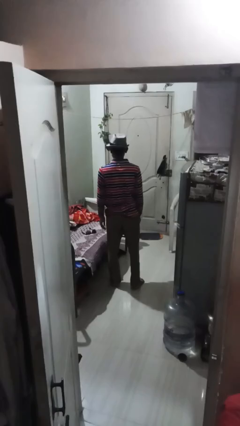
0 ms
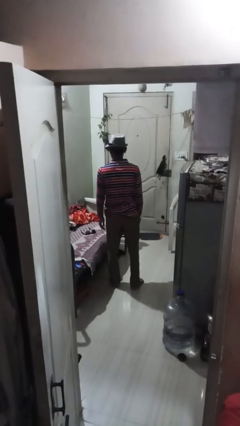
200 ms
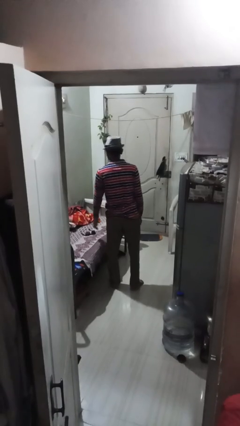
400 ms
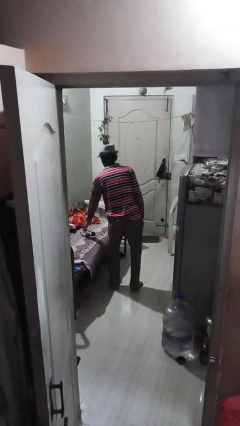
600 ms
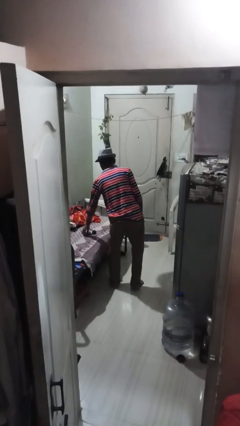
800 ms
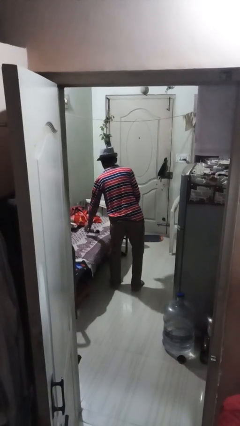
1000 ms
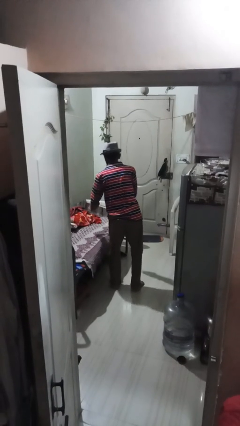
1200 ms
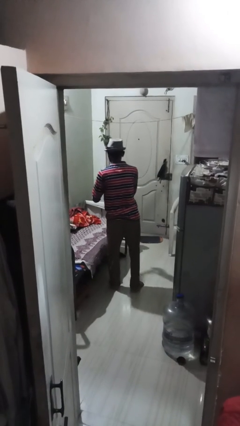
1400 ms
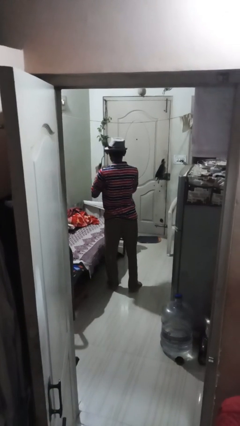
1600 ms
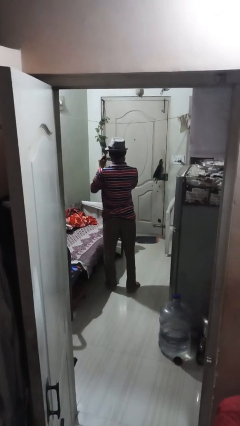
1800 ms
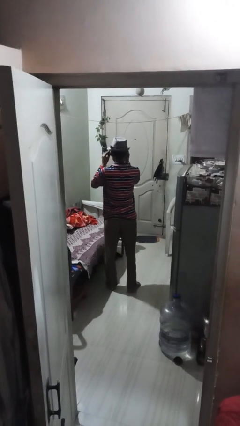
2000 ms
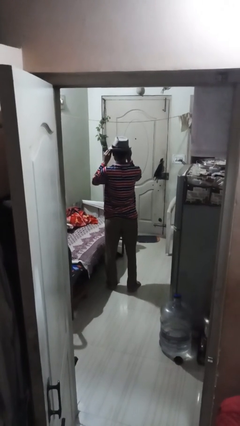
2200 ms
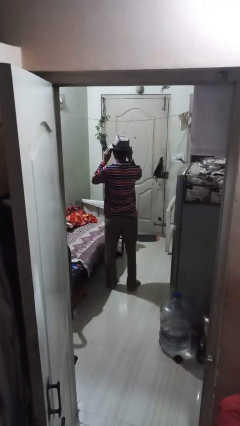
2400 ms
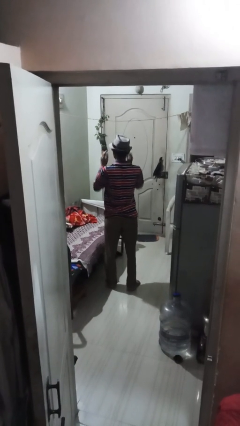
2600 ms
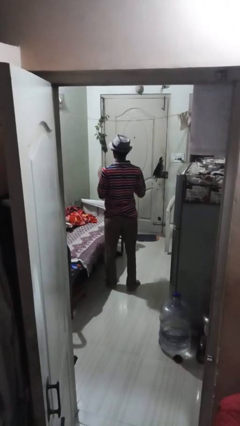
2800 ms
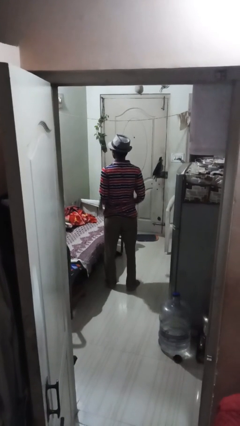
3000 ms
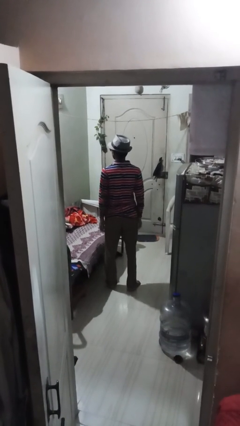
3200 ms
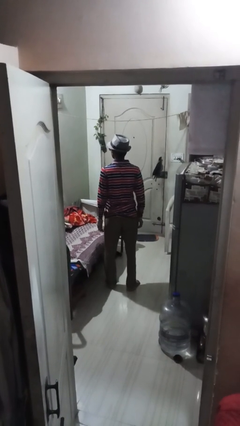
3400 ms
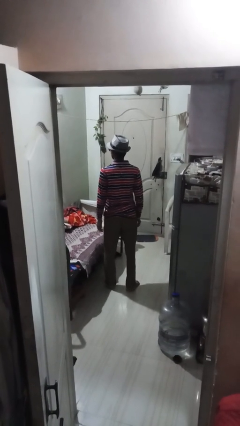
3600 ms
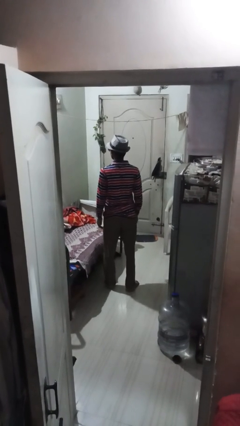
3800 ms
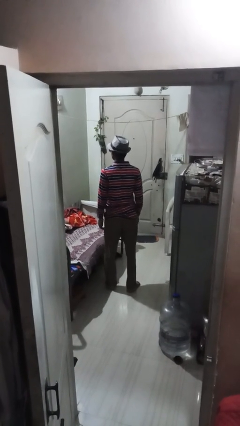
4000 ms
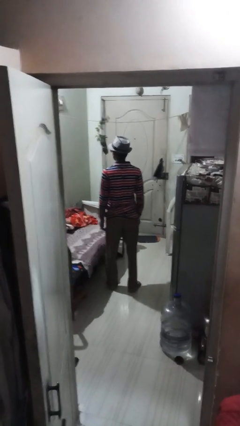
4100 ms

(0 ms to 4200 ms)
person puts on sunglasses

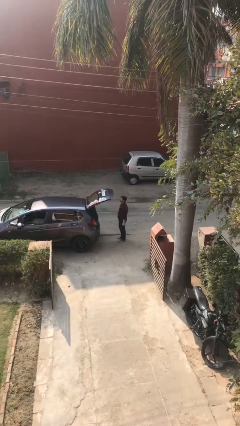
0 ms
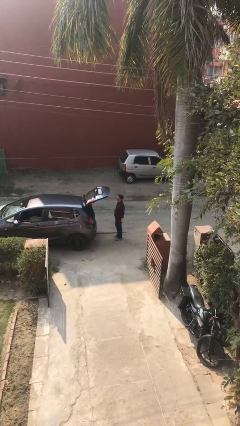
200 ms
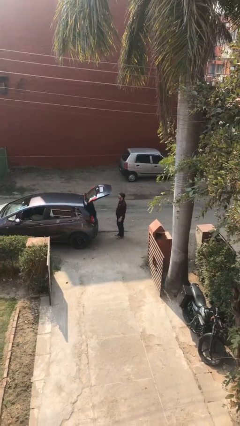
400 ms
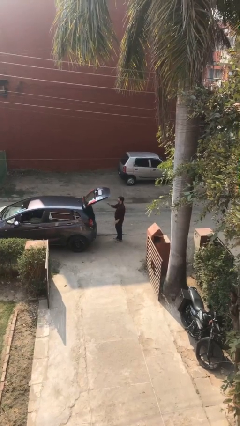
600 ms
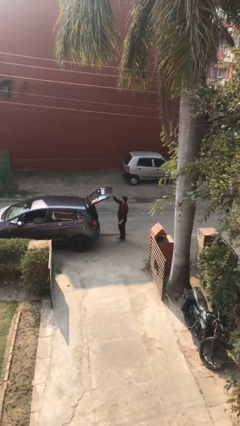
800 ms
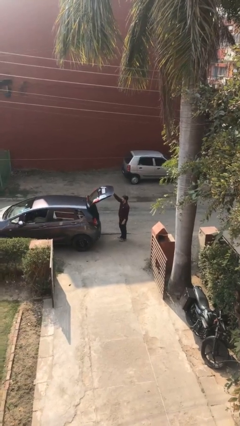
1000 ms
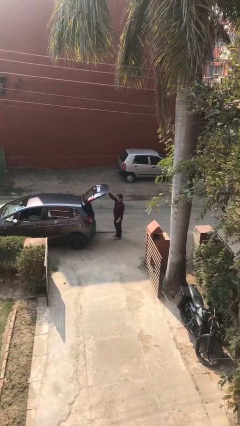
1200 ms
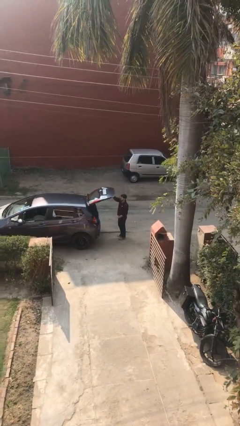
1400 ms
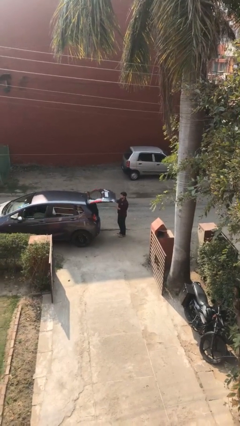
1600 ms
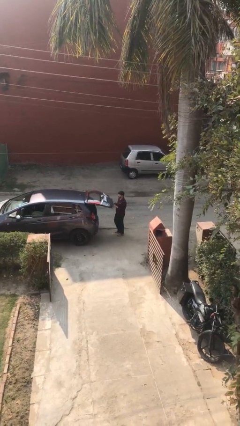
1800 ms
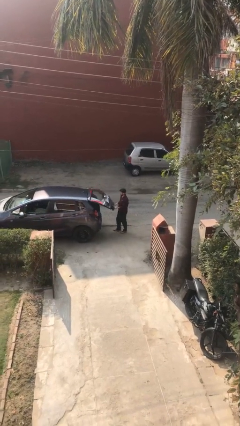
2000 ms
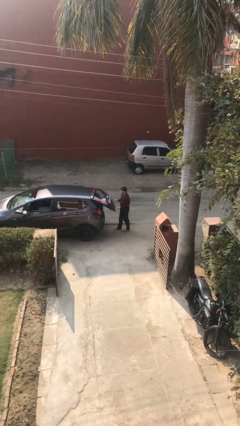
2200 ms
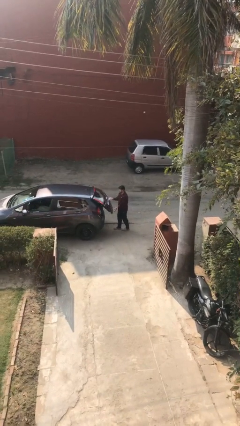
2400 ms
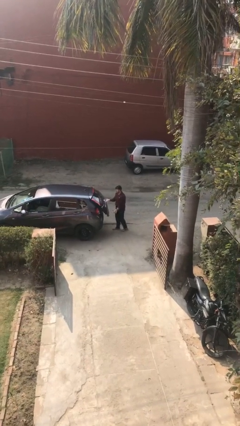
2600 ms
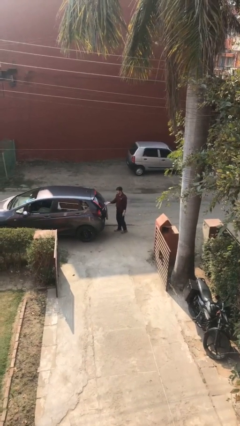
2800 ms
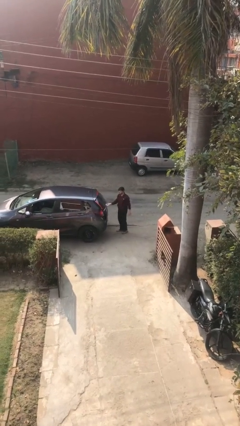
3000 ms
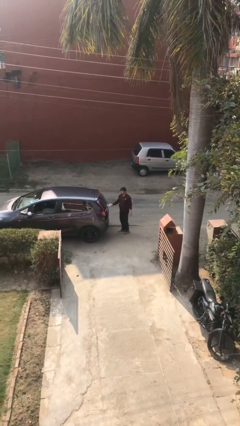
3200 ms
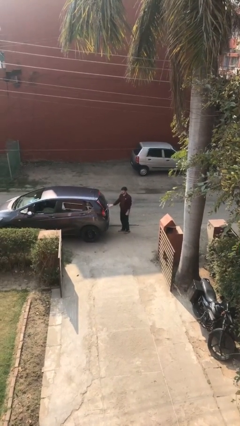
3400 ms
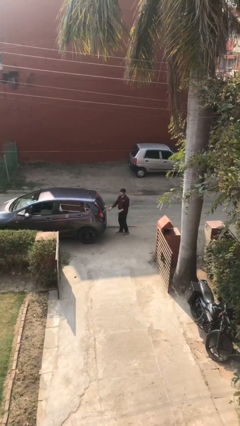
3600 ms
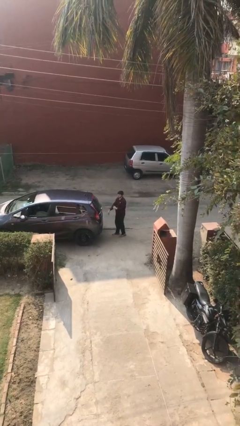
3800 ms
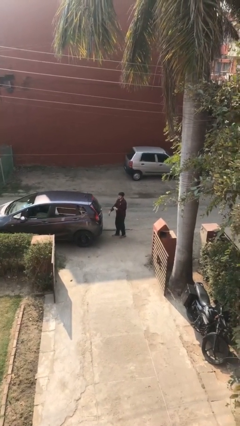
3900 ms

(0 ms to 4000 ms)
person closes car trunk

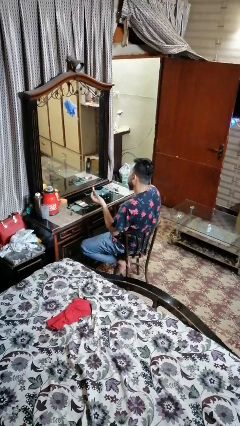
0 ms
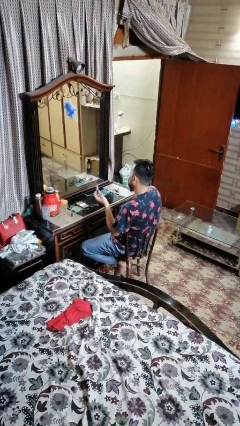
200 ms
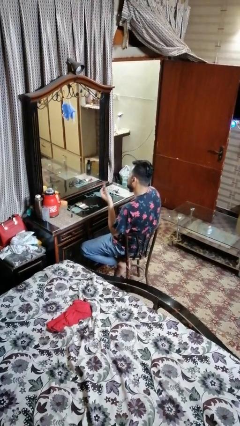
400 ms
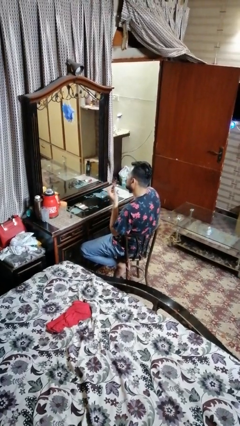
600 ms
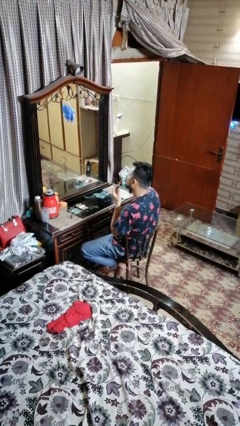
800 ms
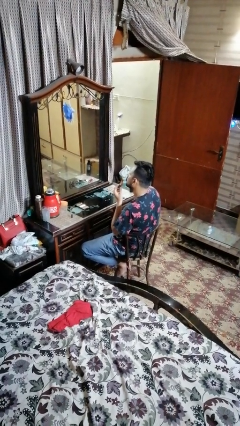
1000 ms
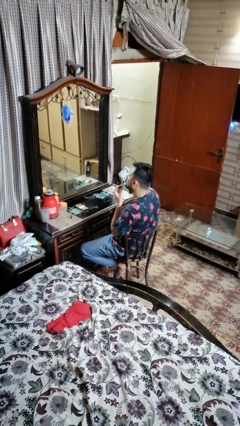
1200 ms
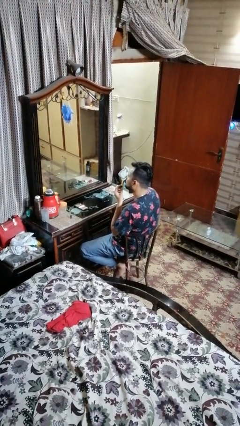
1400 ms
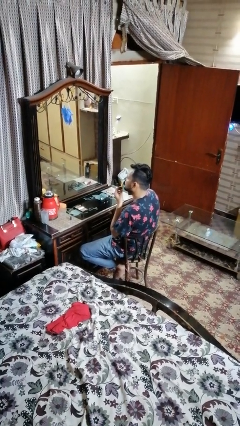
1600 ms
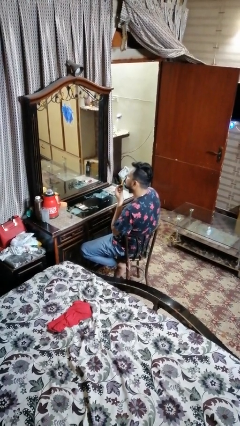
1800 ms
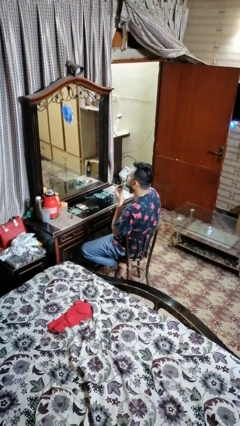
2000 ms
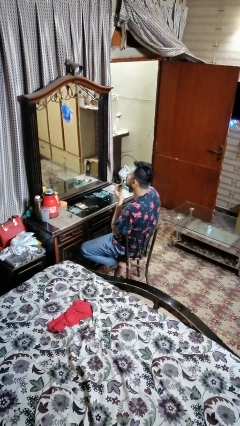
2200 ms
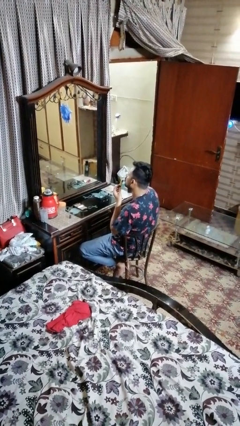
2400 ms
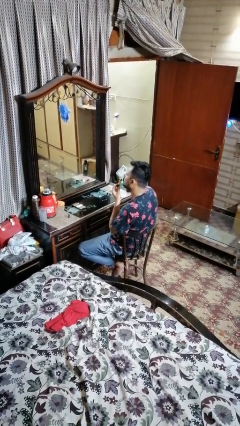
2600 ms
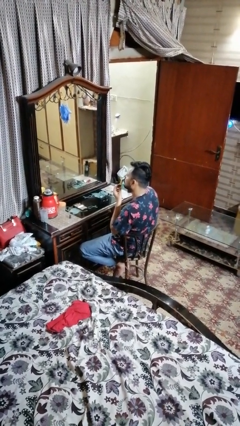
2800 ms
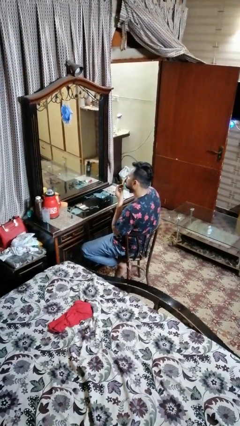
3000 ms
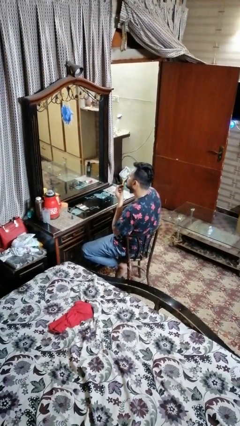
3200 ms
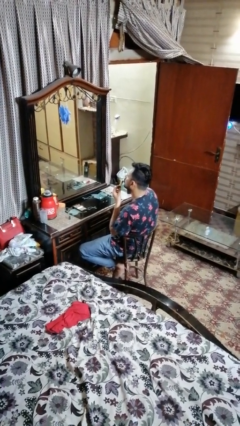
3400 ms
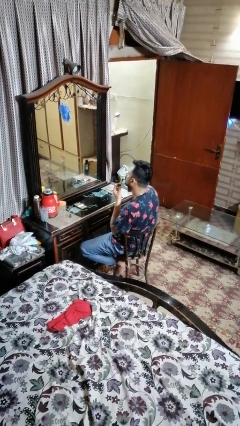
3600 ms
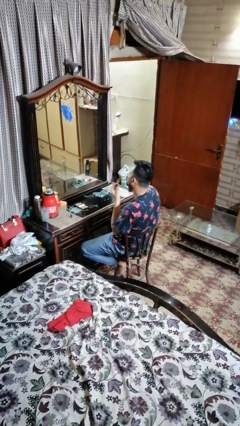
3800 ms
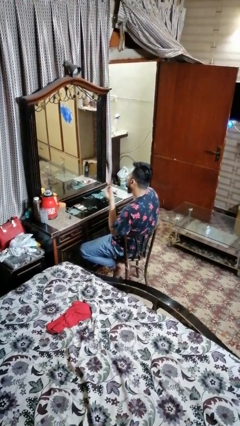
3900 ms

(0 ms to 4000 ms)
person applies lip makeup

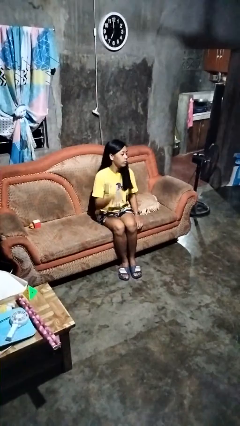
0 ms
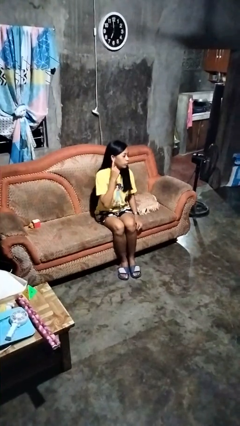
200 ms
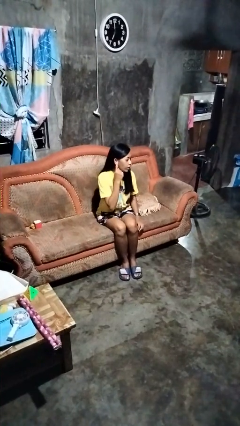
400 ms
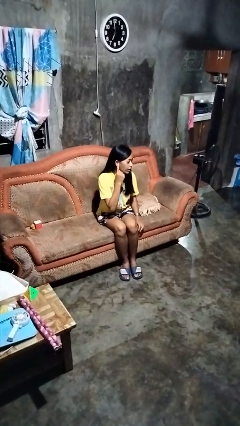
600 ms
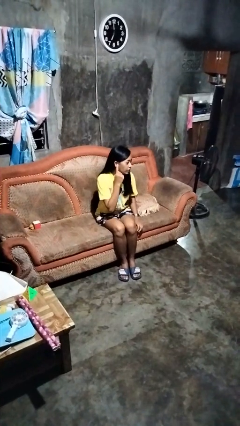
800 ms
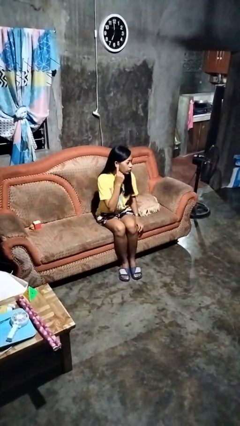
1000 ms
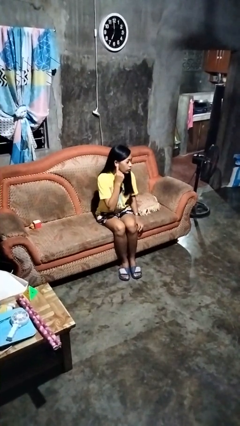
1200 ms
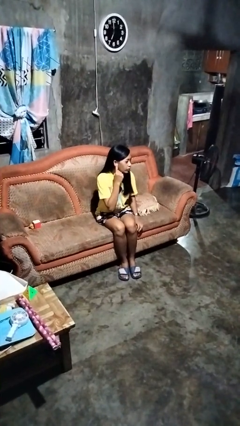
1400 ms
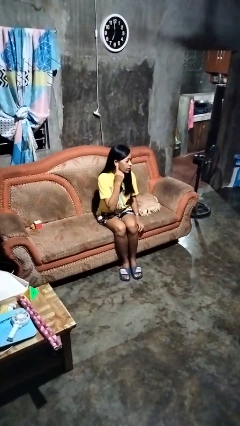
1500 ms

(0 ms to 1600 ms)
person gestures listen closely

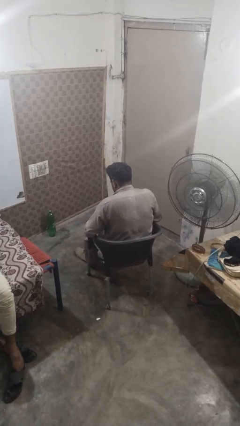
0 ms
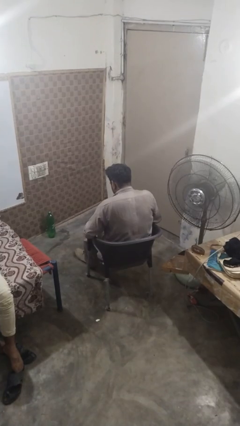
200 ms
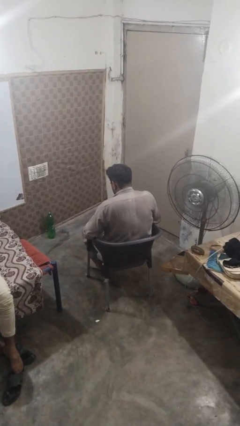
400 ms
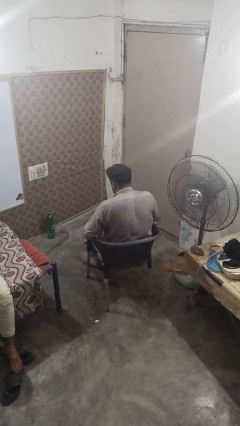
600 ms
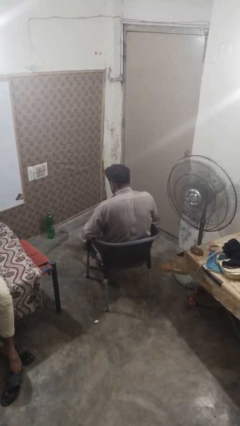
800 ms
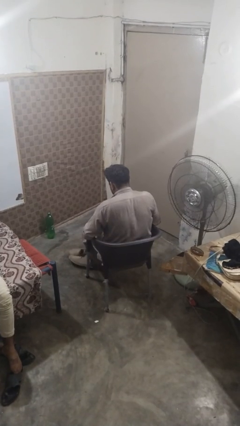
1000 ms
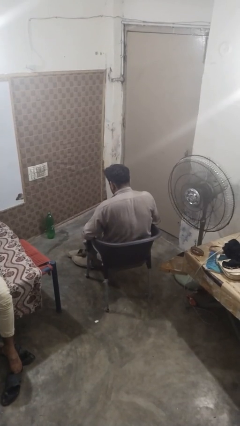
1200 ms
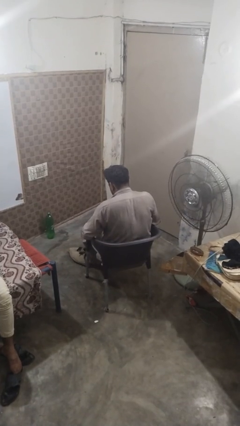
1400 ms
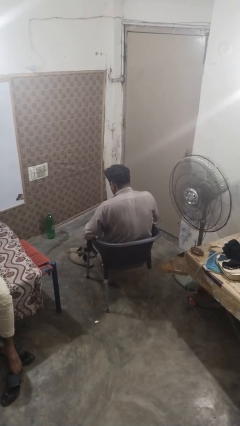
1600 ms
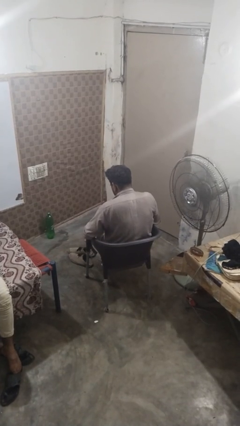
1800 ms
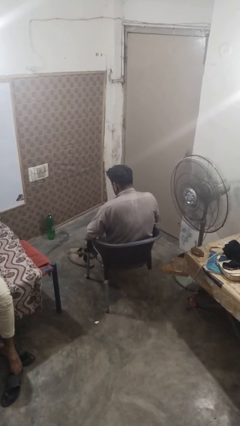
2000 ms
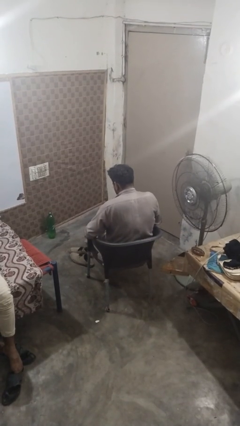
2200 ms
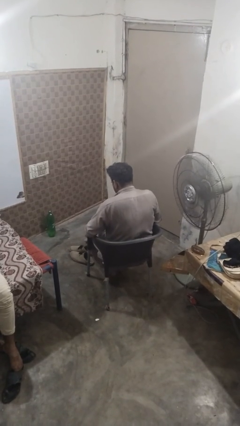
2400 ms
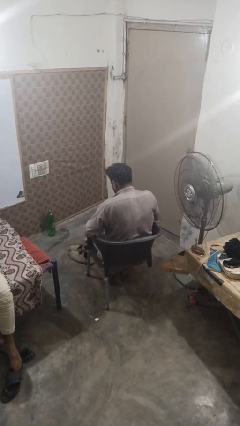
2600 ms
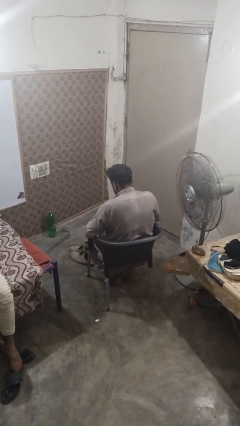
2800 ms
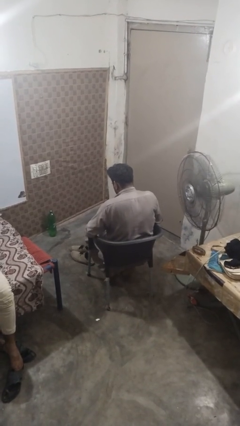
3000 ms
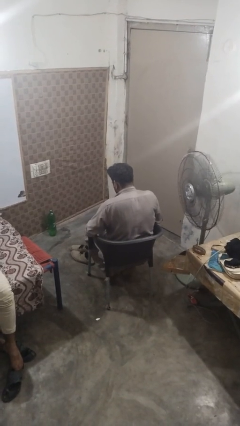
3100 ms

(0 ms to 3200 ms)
person takes off shoes

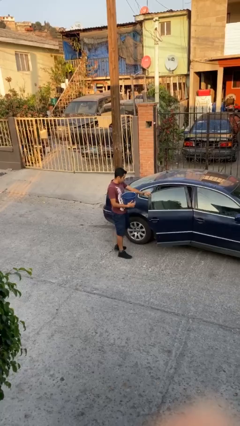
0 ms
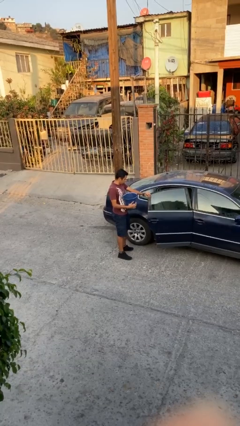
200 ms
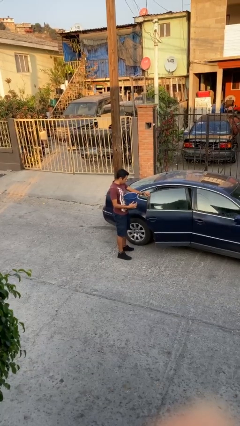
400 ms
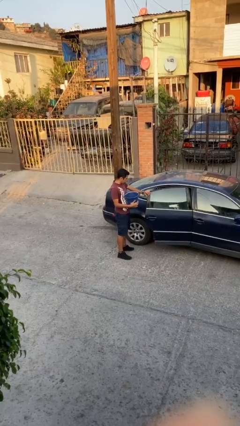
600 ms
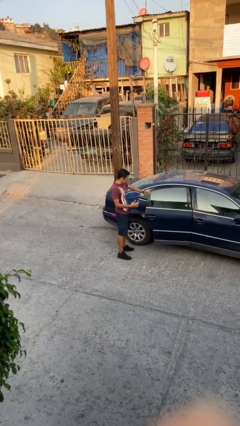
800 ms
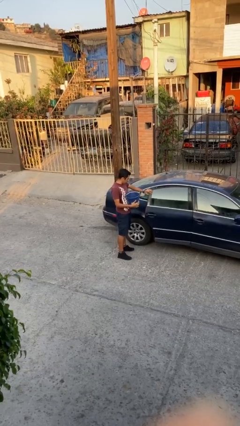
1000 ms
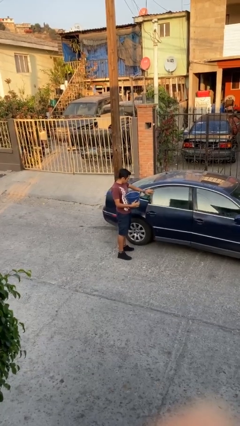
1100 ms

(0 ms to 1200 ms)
person closes car door
